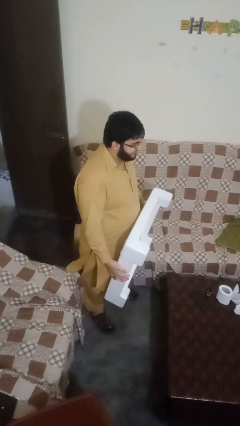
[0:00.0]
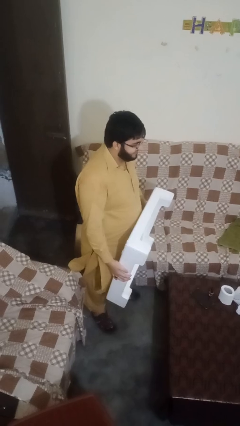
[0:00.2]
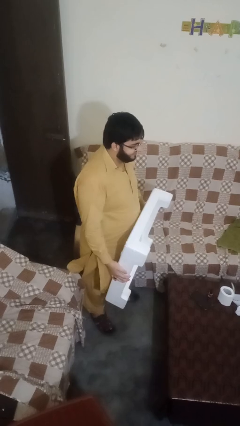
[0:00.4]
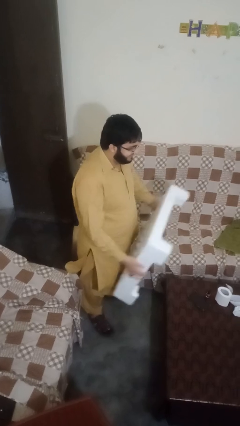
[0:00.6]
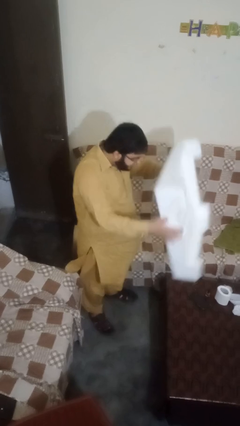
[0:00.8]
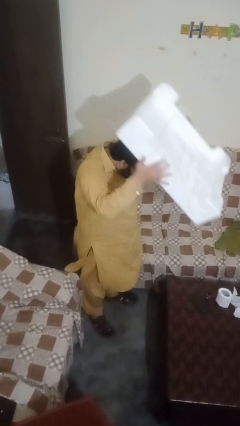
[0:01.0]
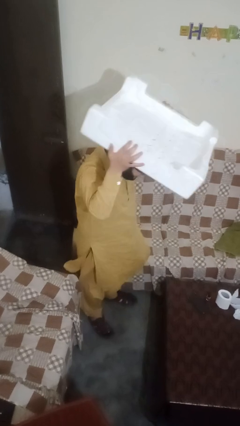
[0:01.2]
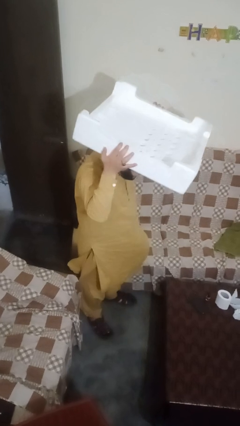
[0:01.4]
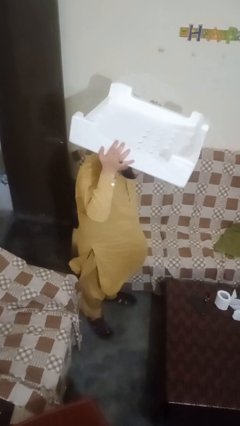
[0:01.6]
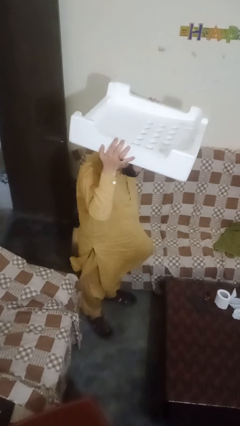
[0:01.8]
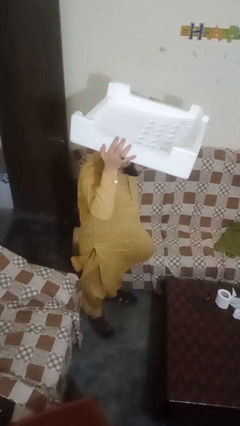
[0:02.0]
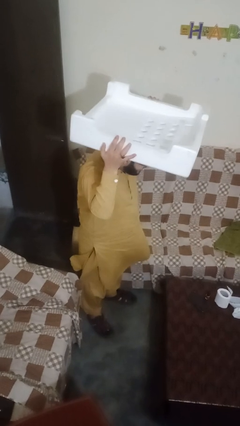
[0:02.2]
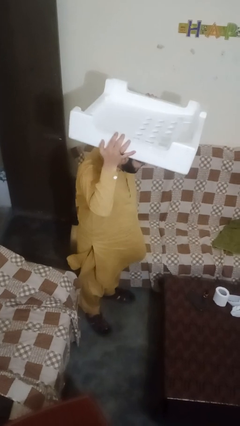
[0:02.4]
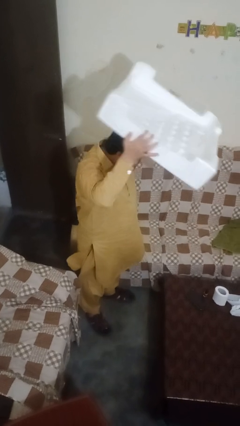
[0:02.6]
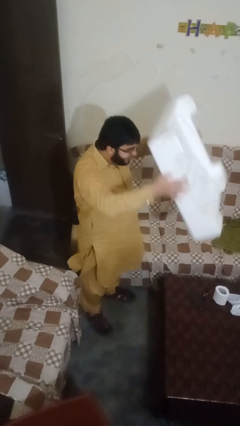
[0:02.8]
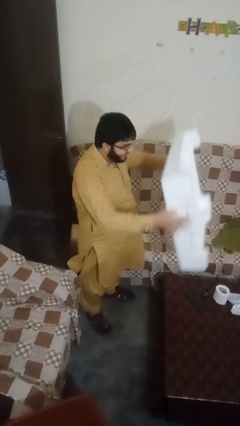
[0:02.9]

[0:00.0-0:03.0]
person holds object above head

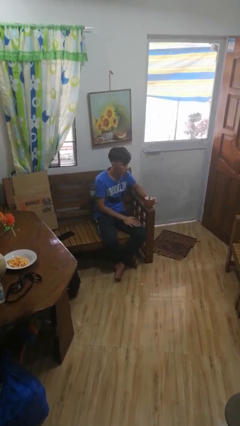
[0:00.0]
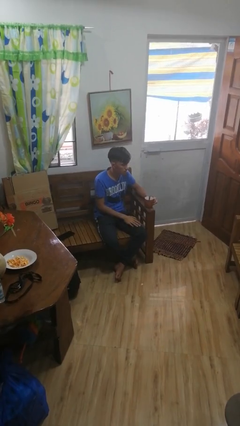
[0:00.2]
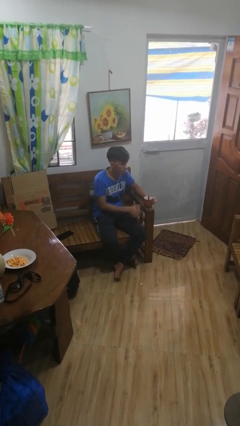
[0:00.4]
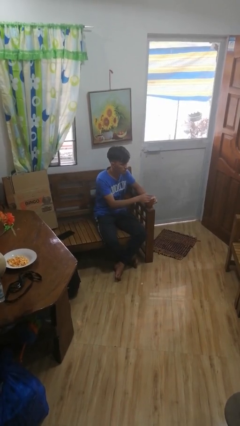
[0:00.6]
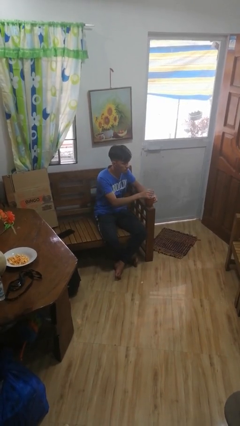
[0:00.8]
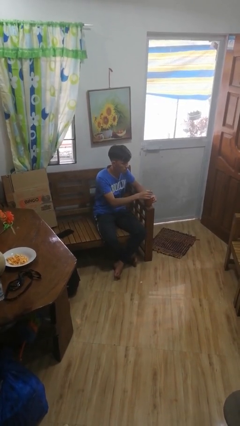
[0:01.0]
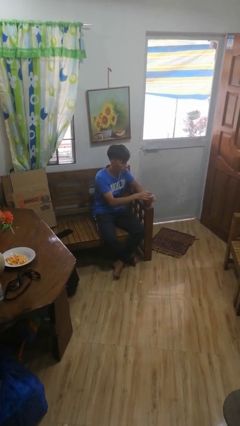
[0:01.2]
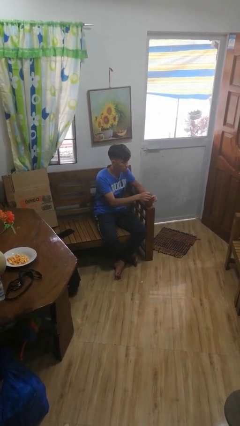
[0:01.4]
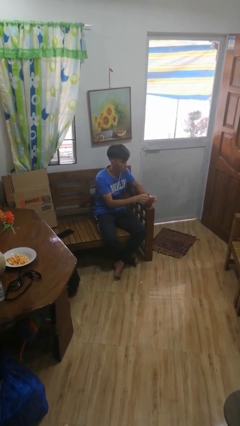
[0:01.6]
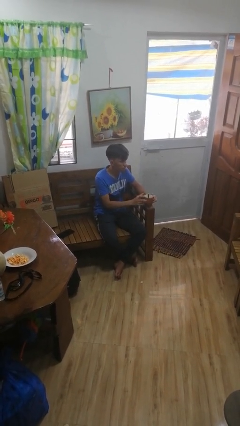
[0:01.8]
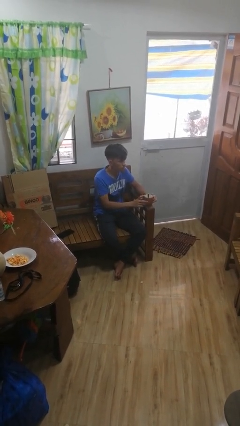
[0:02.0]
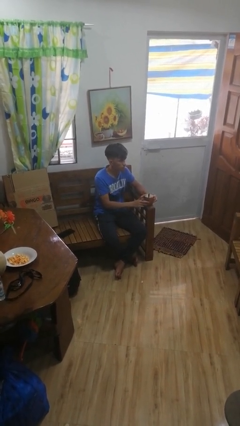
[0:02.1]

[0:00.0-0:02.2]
person stirs mug

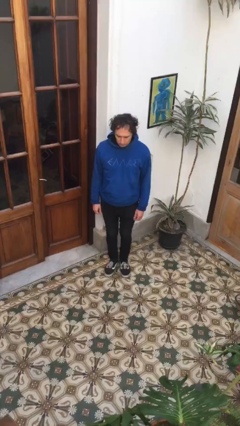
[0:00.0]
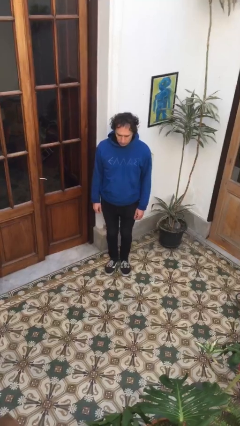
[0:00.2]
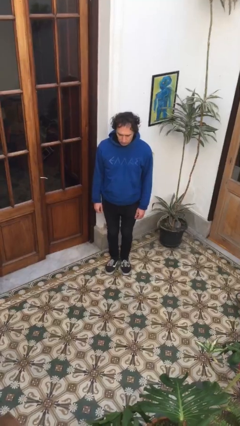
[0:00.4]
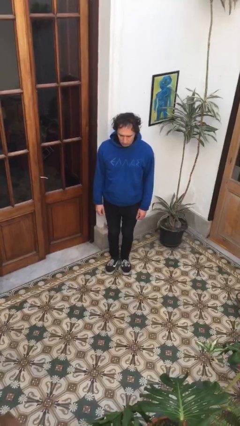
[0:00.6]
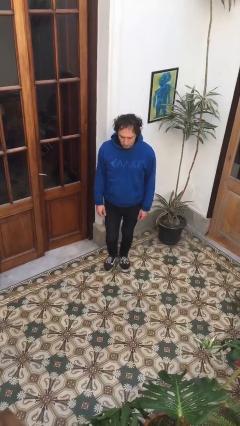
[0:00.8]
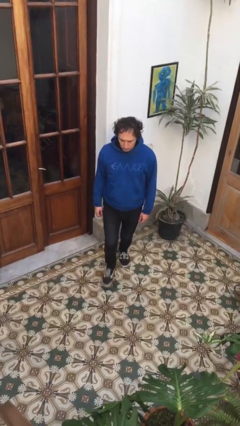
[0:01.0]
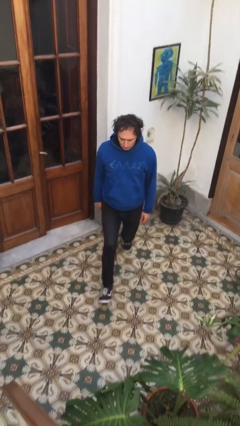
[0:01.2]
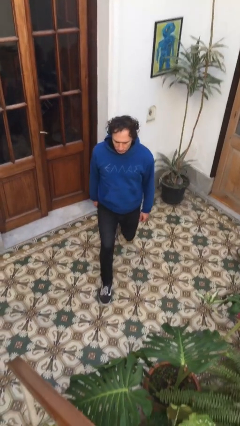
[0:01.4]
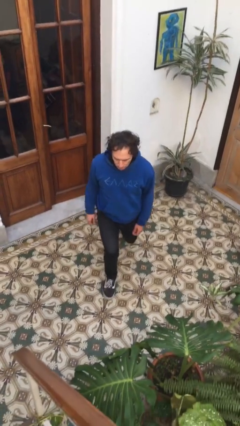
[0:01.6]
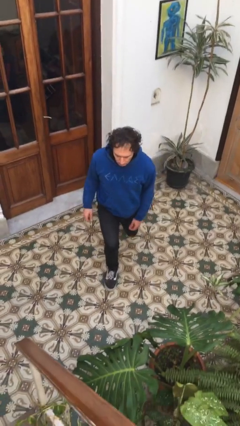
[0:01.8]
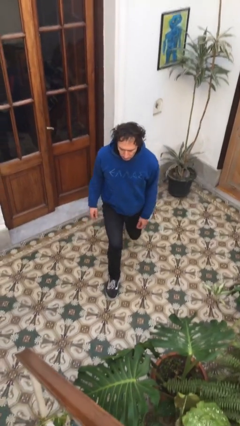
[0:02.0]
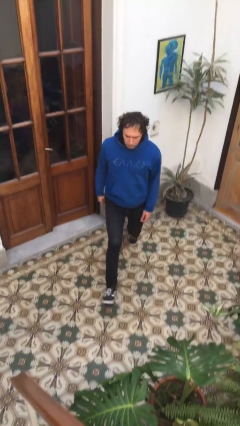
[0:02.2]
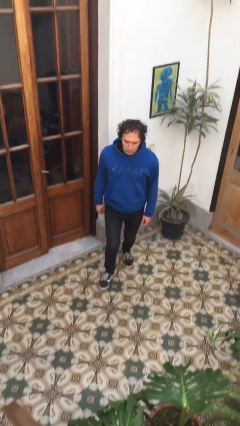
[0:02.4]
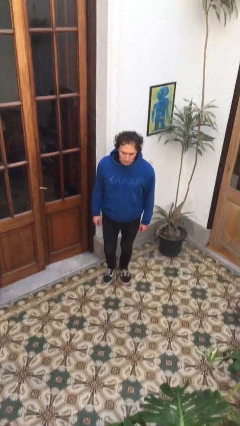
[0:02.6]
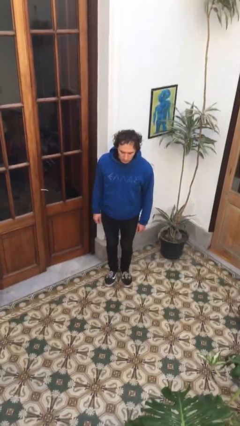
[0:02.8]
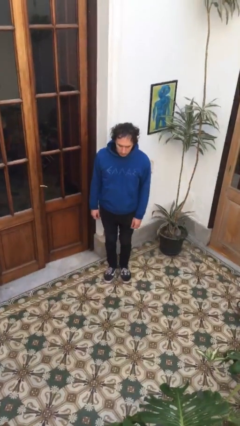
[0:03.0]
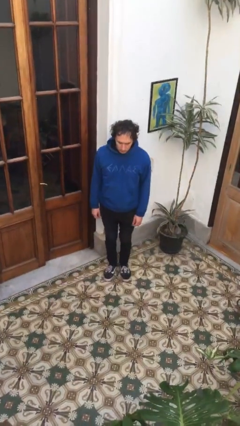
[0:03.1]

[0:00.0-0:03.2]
person exercises with lunges

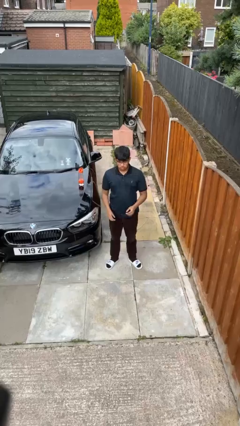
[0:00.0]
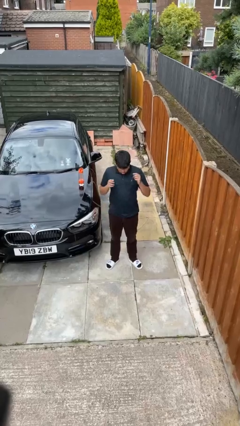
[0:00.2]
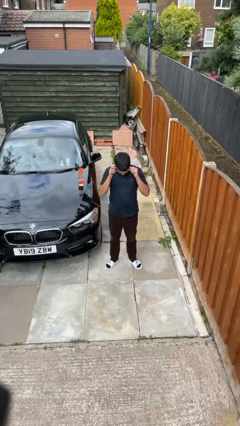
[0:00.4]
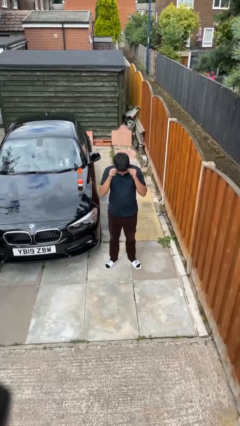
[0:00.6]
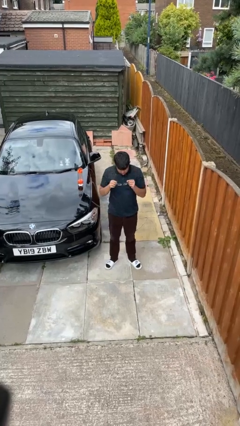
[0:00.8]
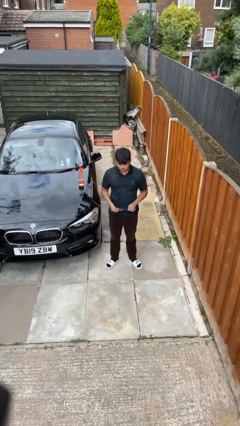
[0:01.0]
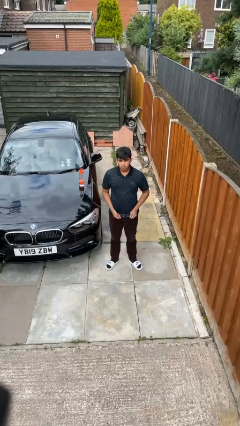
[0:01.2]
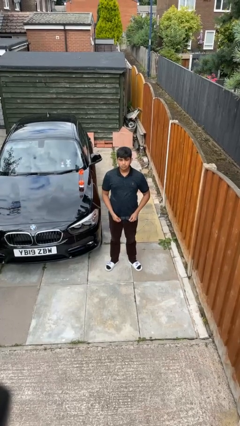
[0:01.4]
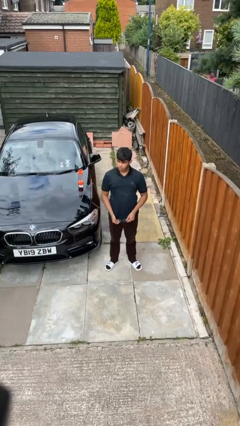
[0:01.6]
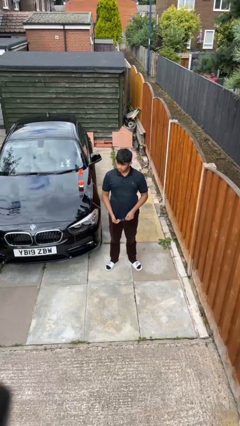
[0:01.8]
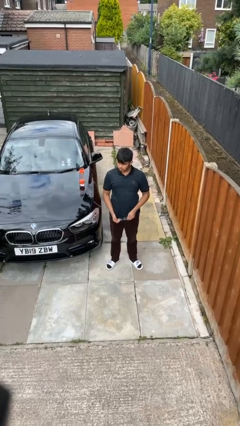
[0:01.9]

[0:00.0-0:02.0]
person takes off glasses

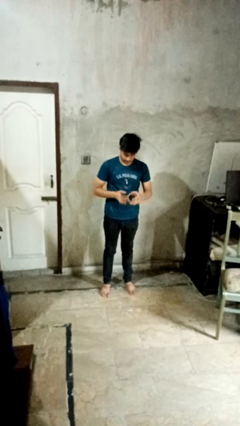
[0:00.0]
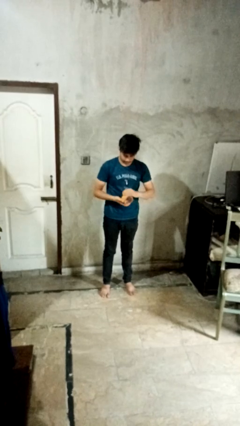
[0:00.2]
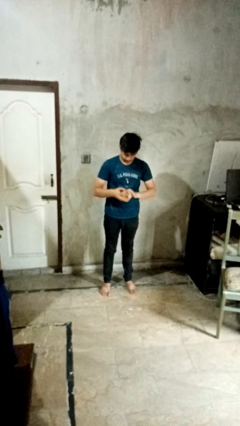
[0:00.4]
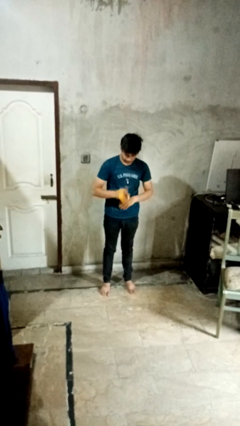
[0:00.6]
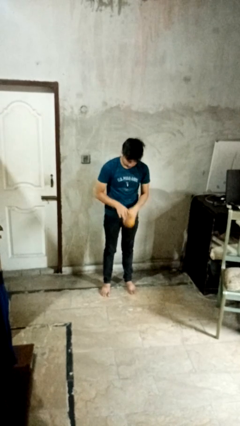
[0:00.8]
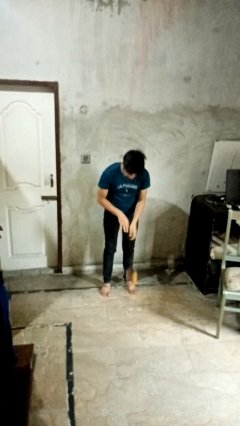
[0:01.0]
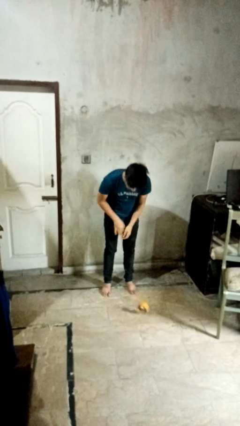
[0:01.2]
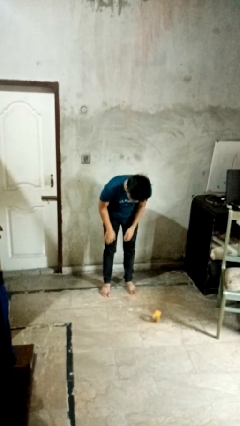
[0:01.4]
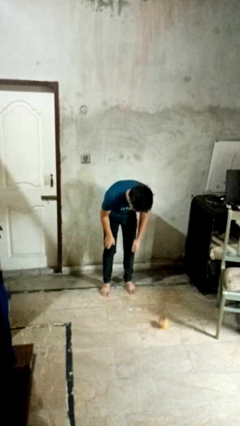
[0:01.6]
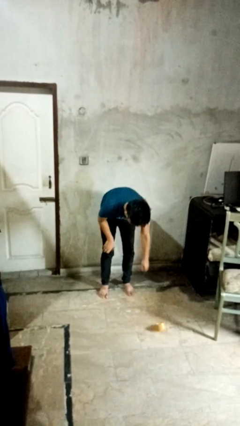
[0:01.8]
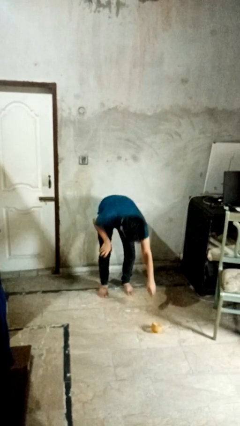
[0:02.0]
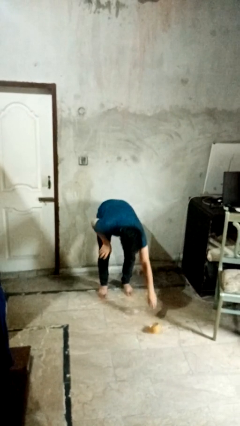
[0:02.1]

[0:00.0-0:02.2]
person drops object

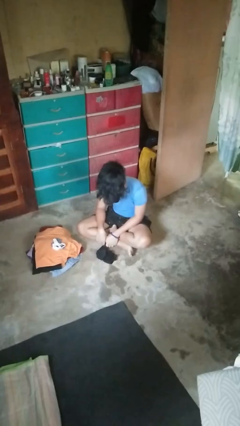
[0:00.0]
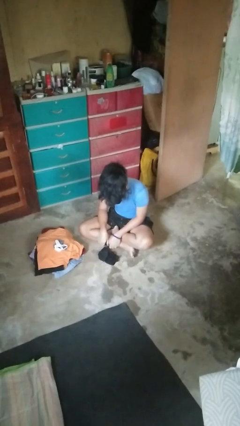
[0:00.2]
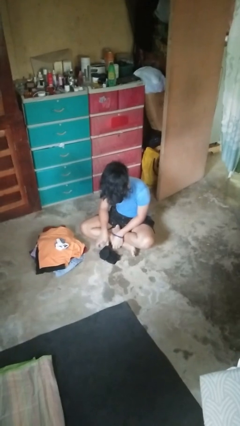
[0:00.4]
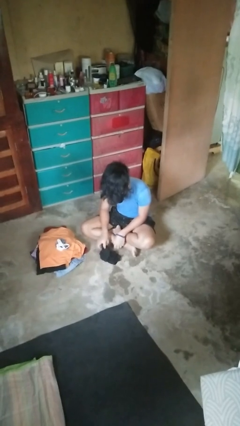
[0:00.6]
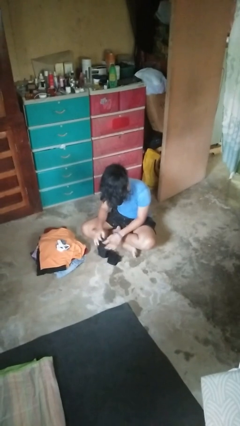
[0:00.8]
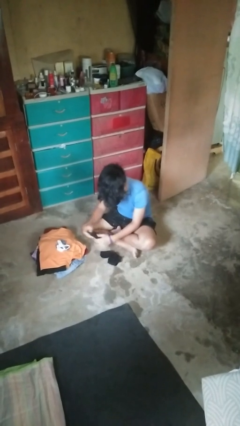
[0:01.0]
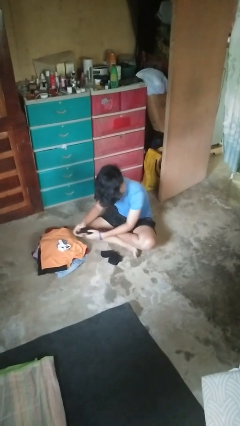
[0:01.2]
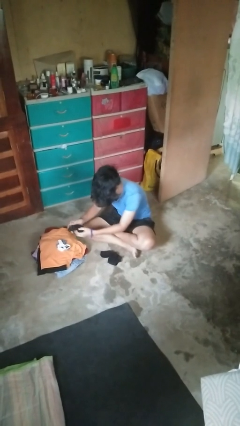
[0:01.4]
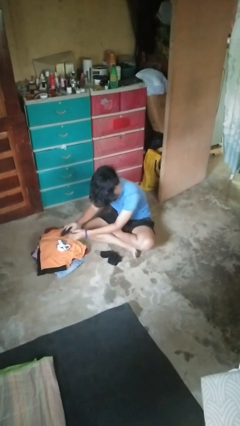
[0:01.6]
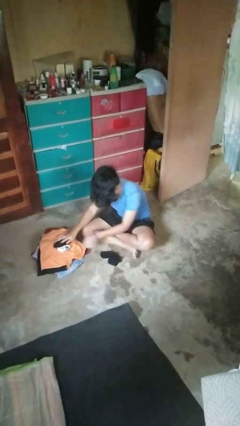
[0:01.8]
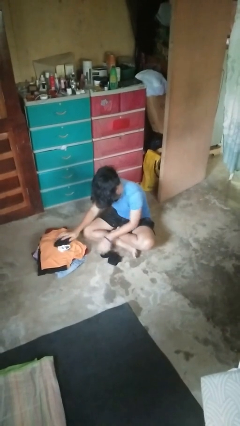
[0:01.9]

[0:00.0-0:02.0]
person folds socks

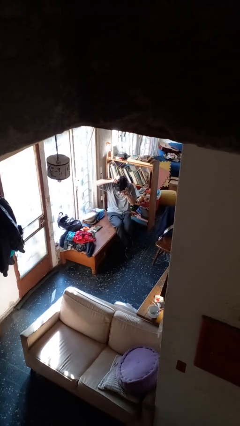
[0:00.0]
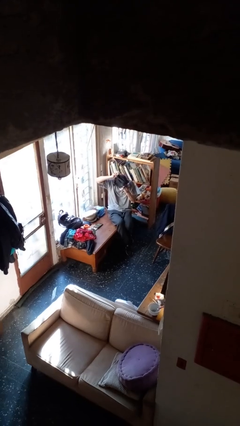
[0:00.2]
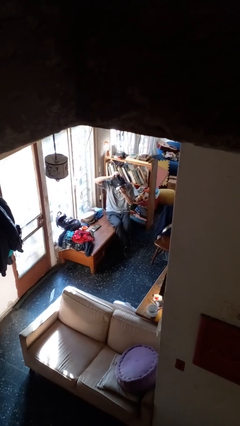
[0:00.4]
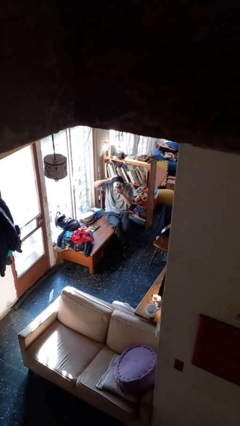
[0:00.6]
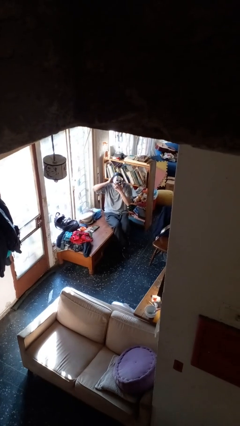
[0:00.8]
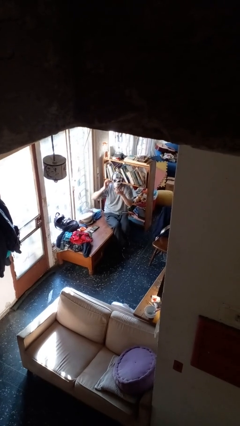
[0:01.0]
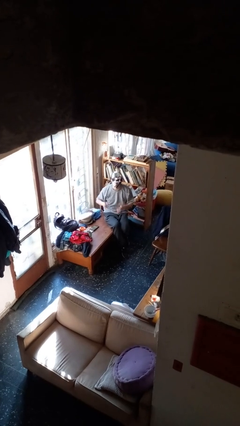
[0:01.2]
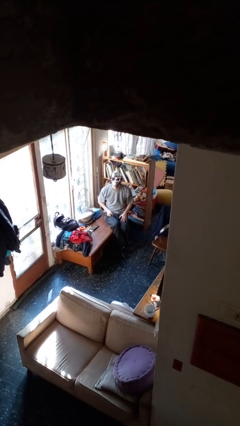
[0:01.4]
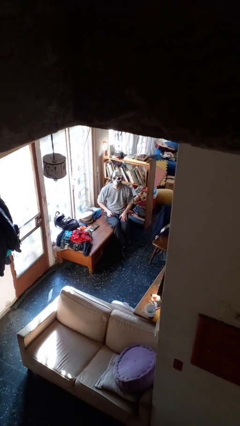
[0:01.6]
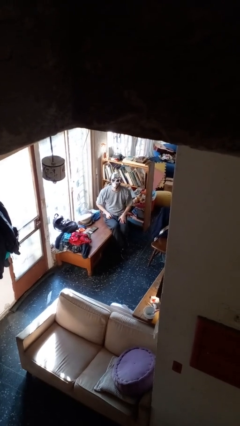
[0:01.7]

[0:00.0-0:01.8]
person puts on facemask

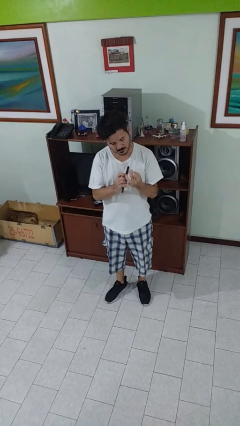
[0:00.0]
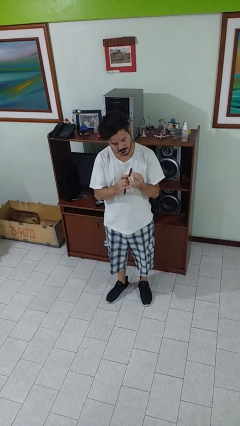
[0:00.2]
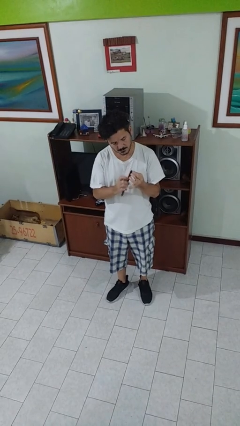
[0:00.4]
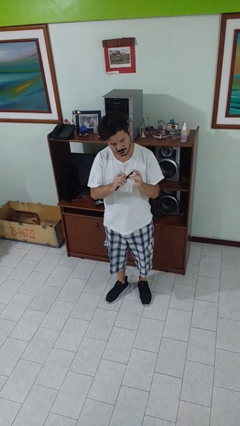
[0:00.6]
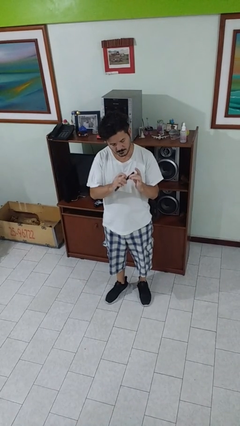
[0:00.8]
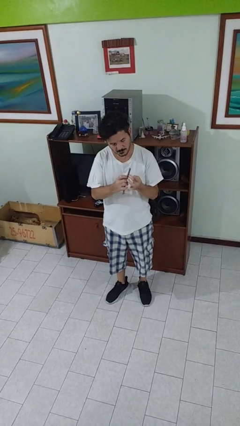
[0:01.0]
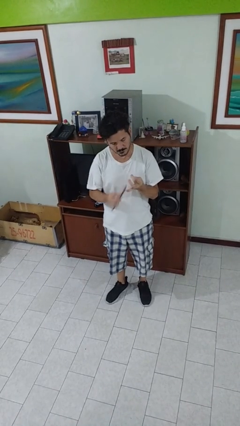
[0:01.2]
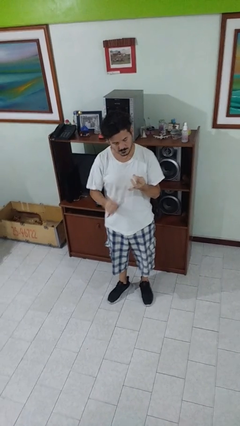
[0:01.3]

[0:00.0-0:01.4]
person files fingernails
